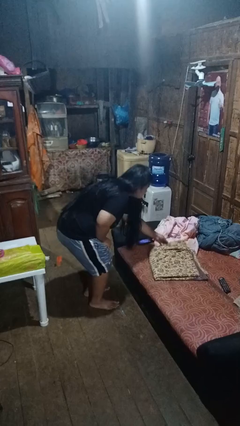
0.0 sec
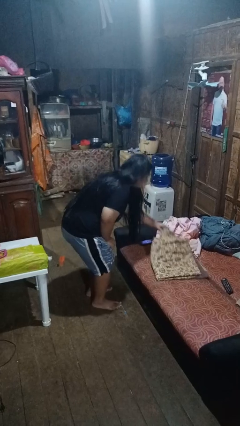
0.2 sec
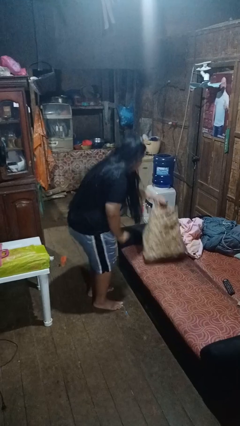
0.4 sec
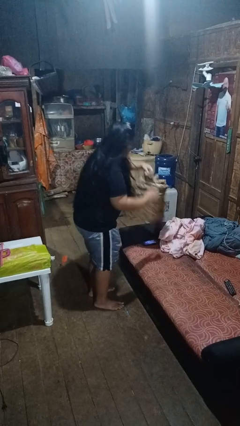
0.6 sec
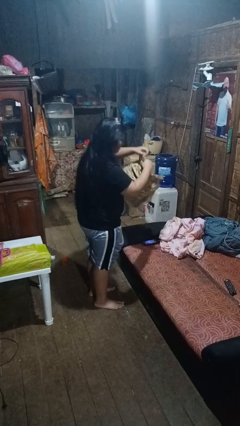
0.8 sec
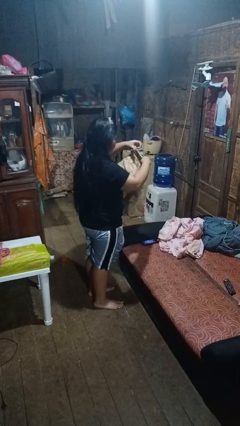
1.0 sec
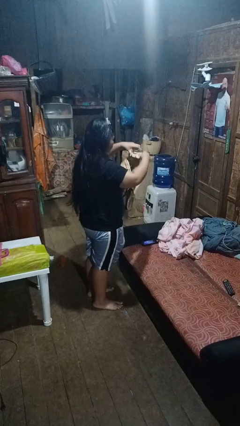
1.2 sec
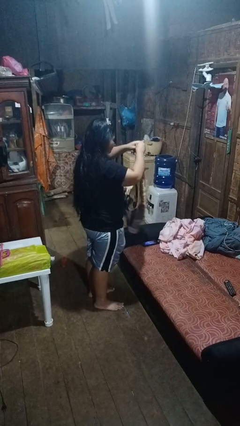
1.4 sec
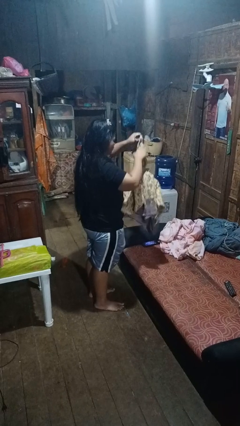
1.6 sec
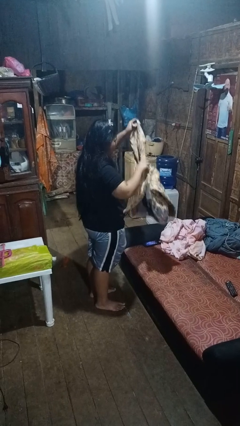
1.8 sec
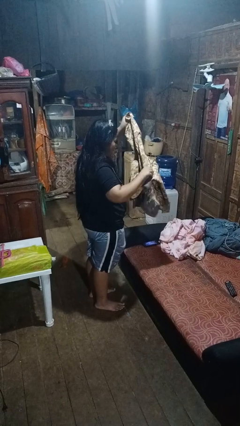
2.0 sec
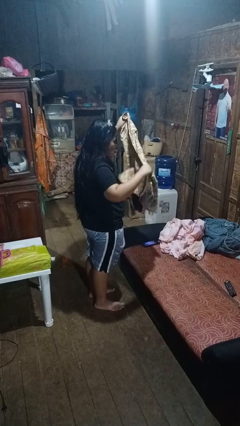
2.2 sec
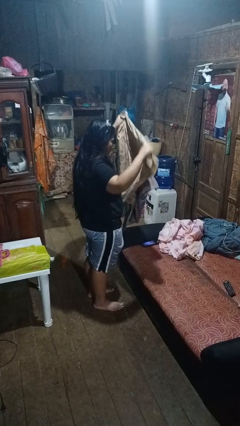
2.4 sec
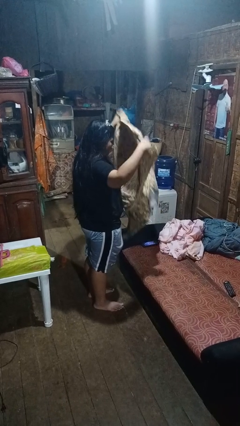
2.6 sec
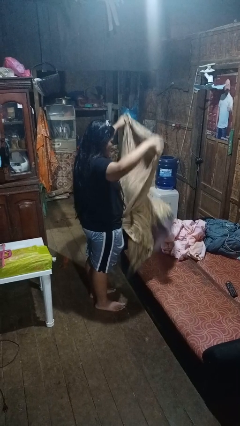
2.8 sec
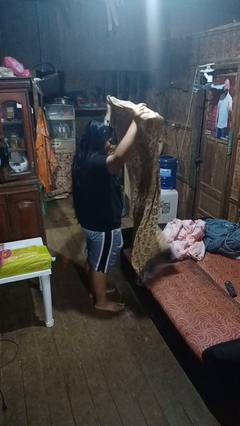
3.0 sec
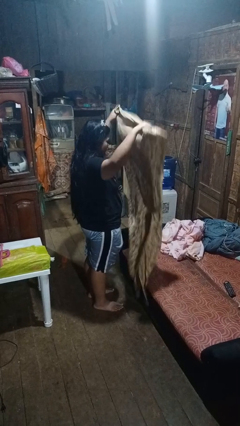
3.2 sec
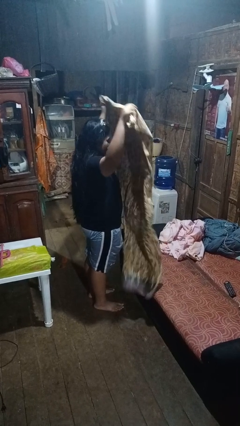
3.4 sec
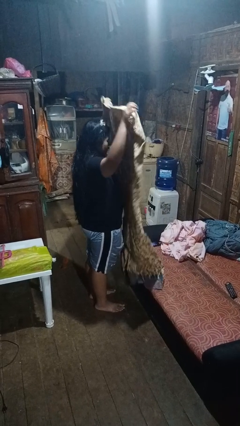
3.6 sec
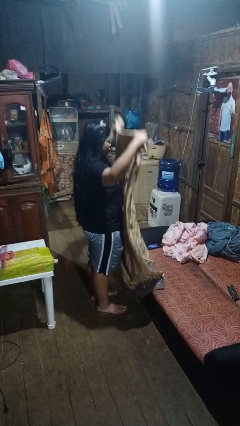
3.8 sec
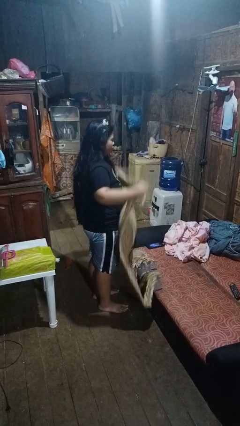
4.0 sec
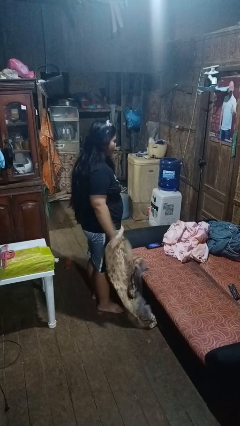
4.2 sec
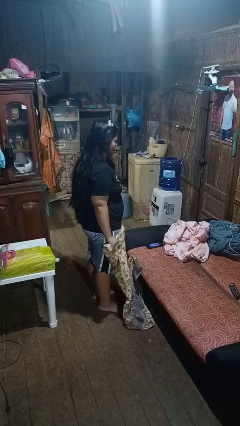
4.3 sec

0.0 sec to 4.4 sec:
person unfolds blanket

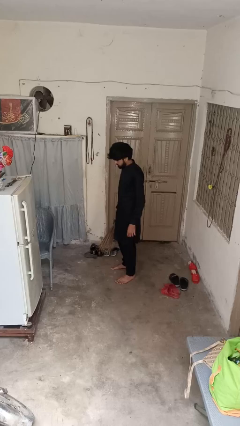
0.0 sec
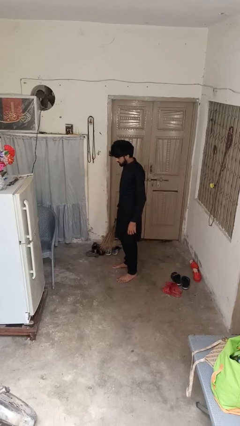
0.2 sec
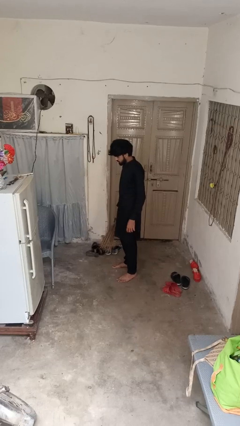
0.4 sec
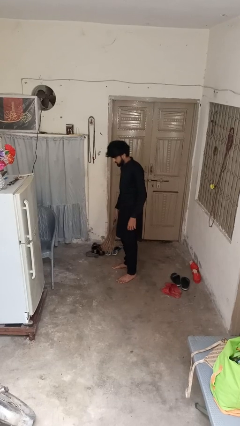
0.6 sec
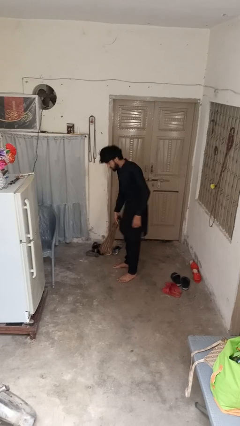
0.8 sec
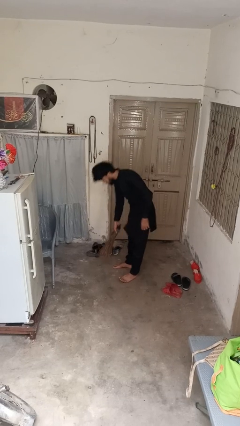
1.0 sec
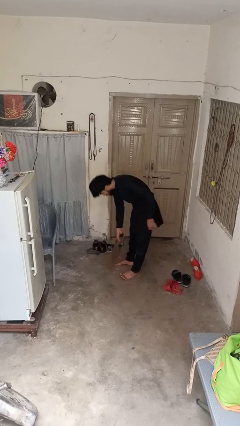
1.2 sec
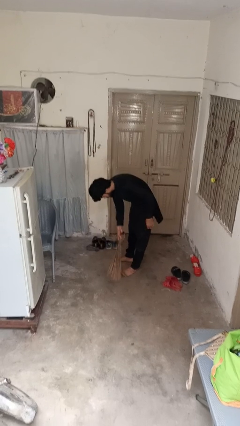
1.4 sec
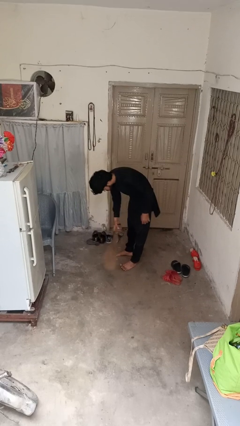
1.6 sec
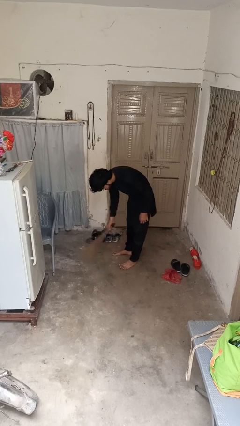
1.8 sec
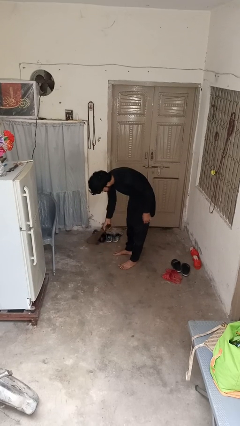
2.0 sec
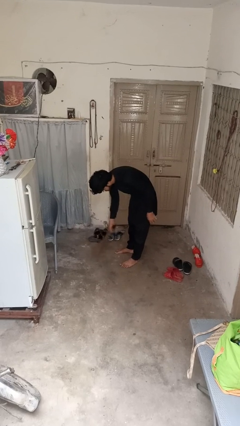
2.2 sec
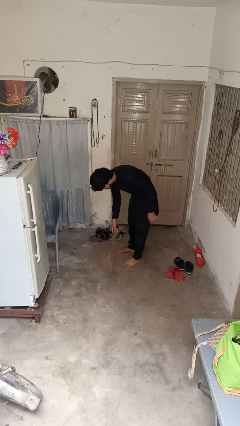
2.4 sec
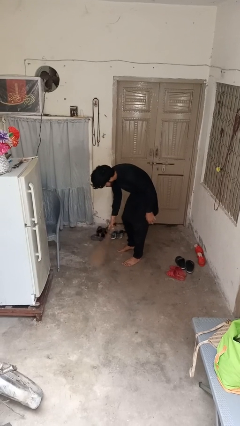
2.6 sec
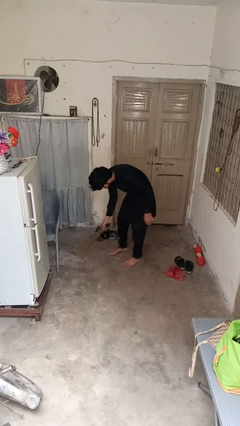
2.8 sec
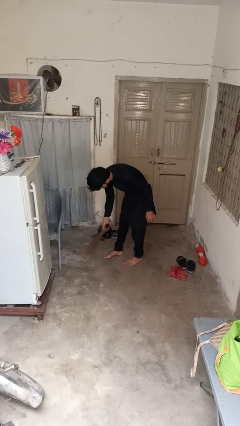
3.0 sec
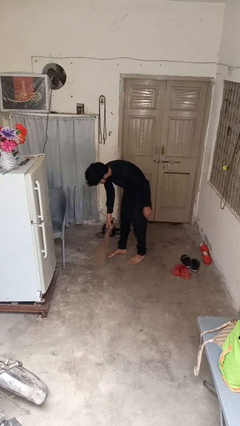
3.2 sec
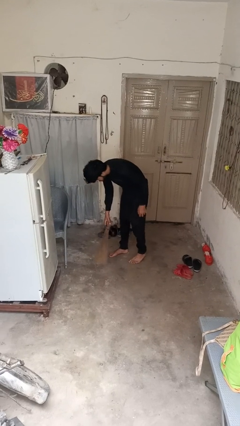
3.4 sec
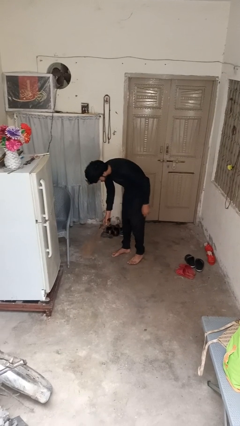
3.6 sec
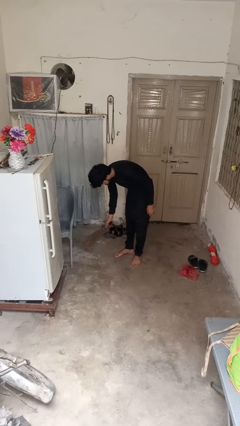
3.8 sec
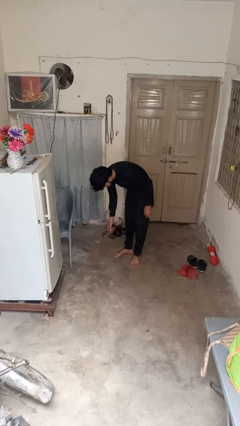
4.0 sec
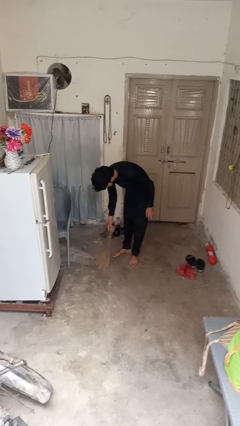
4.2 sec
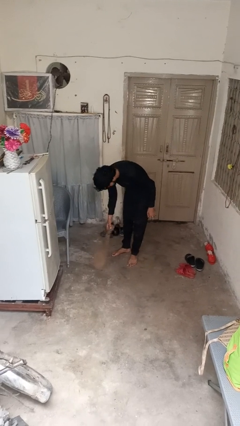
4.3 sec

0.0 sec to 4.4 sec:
person sweeps floor

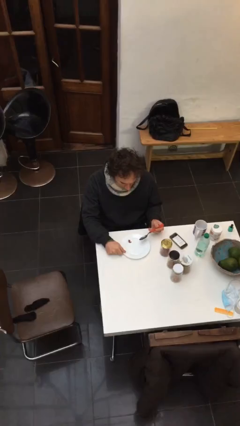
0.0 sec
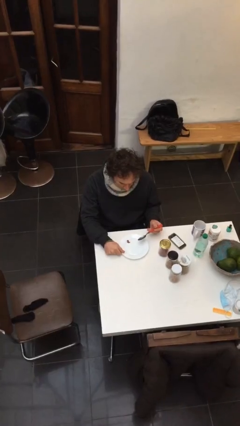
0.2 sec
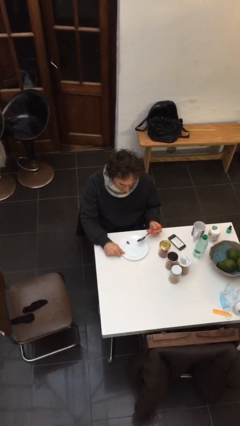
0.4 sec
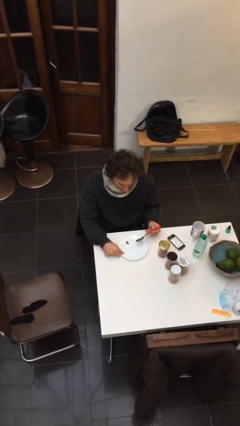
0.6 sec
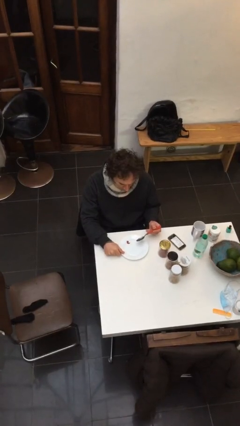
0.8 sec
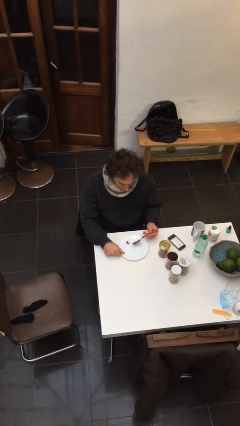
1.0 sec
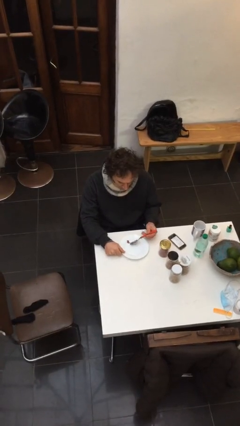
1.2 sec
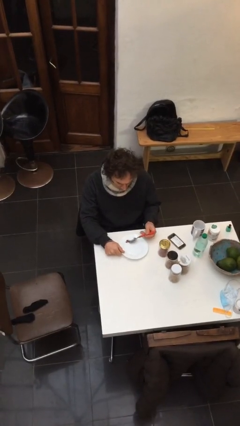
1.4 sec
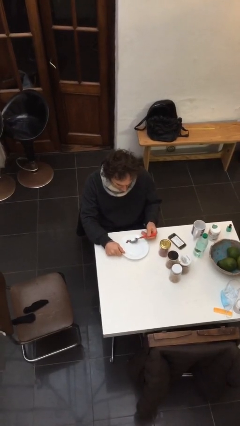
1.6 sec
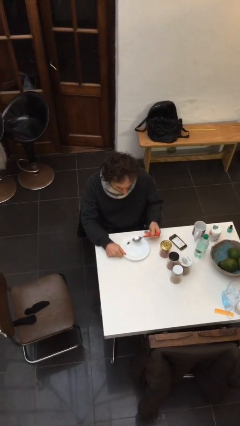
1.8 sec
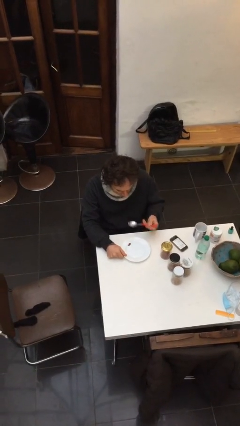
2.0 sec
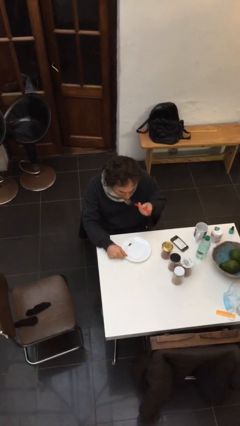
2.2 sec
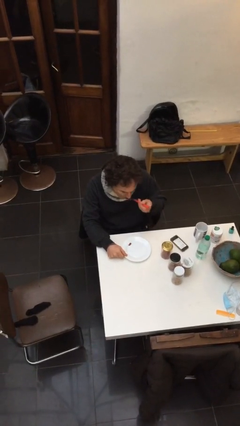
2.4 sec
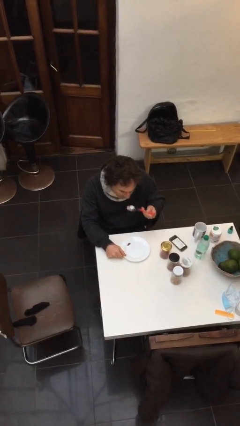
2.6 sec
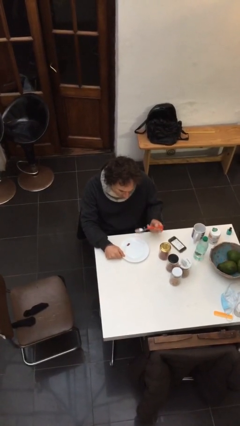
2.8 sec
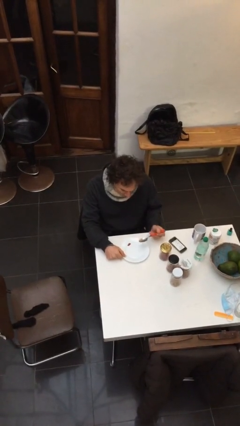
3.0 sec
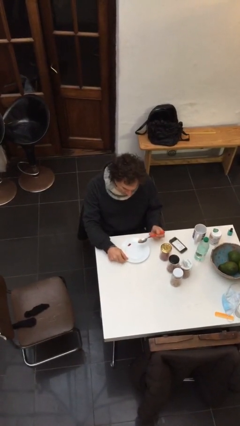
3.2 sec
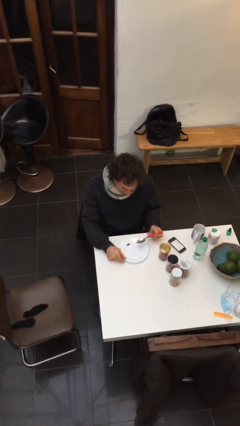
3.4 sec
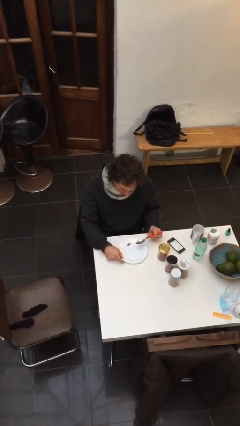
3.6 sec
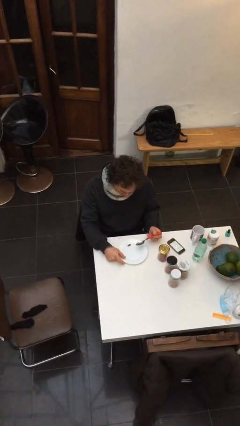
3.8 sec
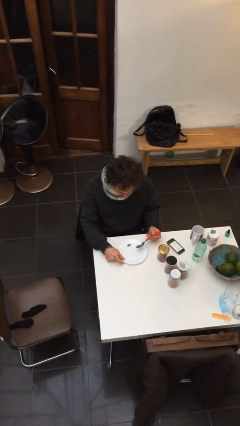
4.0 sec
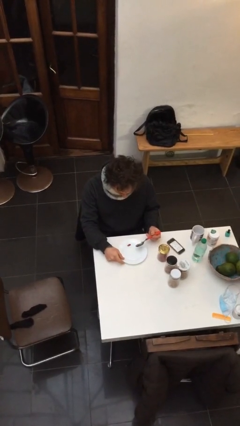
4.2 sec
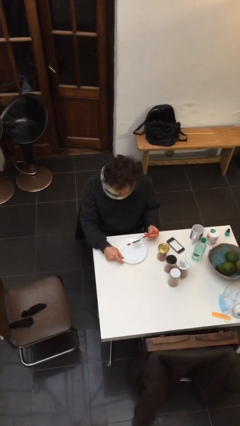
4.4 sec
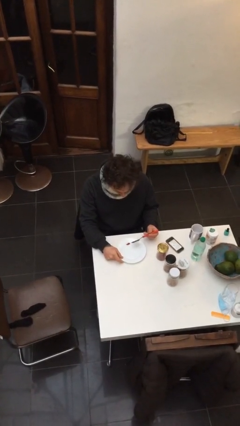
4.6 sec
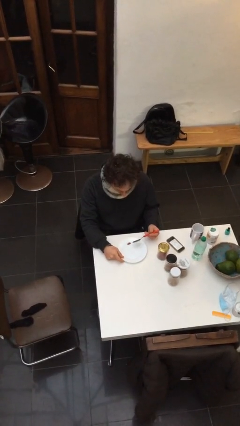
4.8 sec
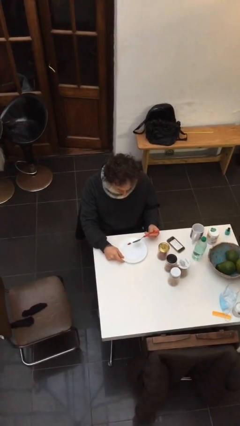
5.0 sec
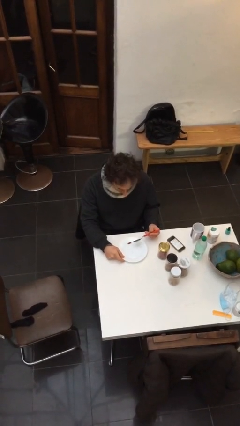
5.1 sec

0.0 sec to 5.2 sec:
person eats with utensil

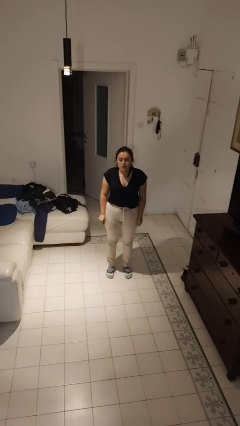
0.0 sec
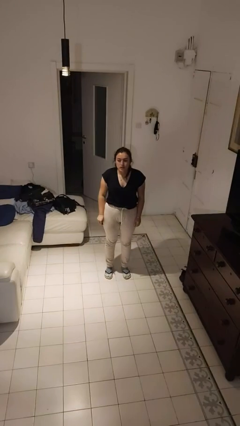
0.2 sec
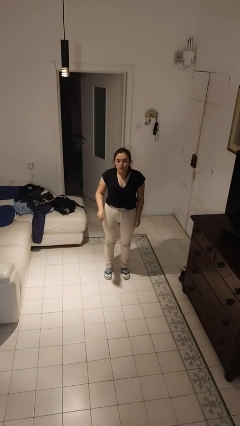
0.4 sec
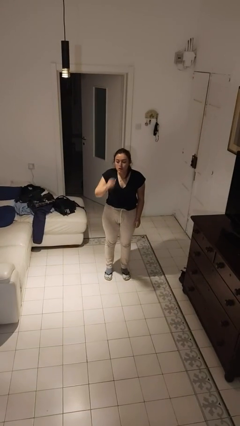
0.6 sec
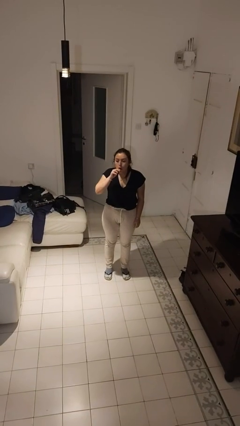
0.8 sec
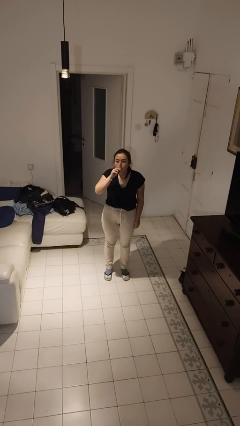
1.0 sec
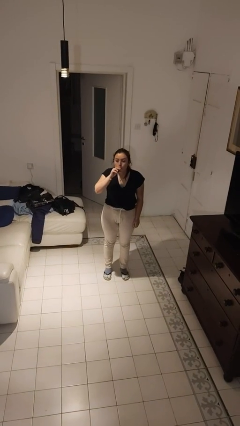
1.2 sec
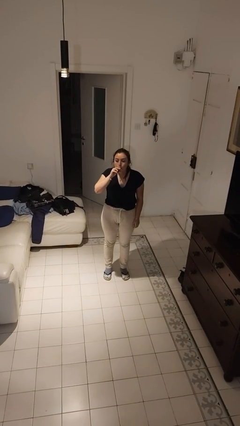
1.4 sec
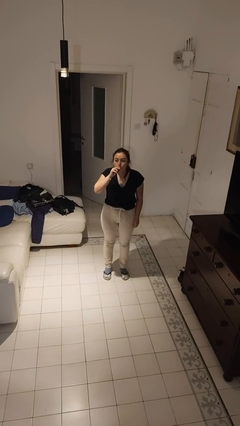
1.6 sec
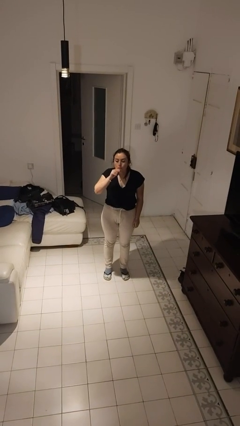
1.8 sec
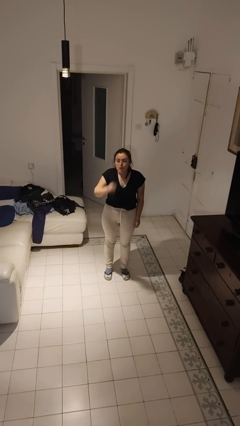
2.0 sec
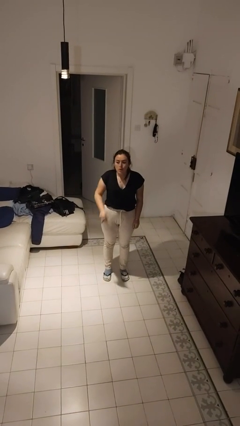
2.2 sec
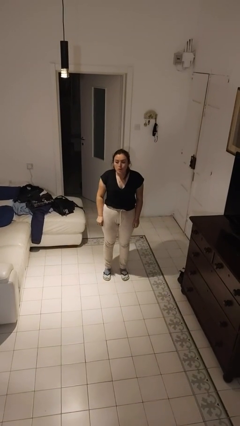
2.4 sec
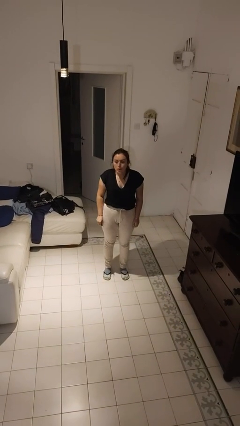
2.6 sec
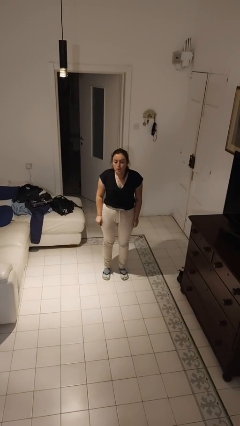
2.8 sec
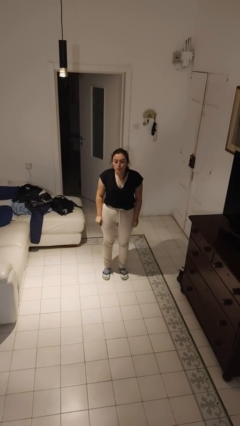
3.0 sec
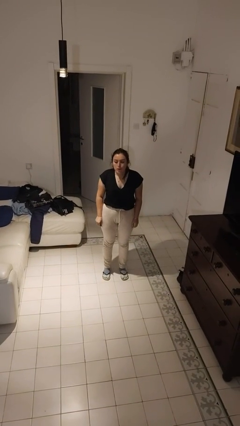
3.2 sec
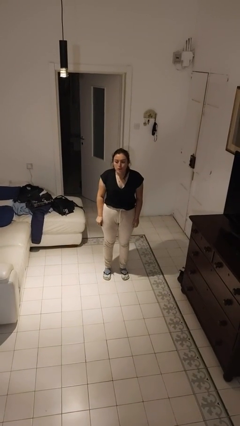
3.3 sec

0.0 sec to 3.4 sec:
person vapes

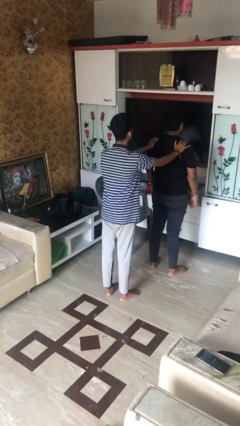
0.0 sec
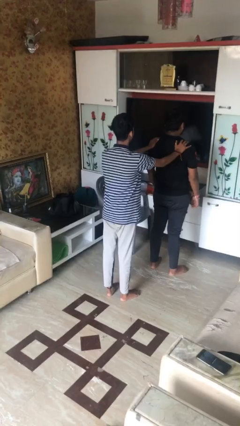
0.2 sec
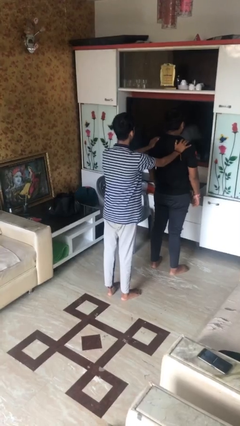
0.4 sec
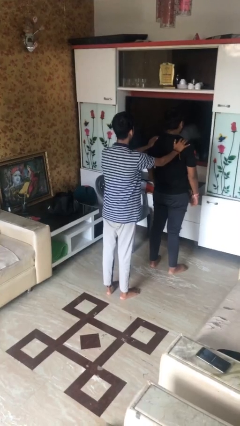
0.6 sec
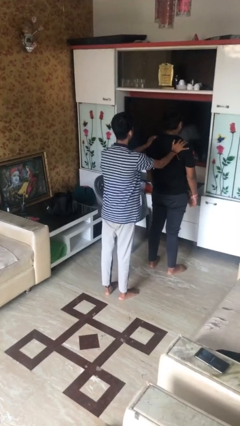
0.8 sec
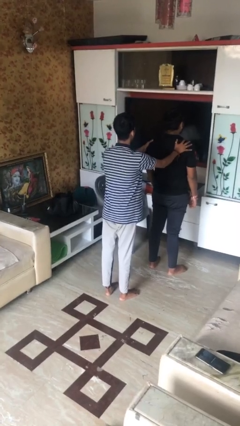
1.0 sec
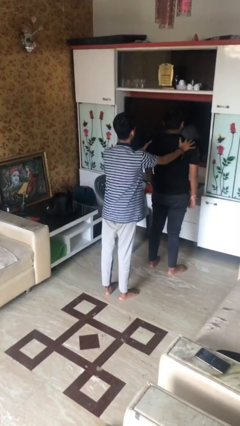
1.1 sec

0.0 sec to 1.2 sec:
person grabs person by shoulder
